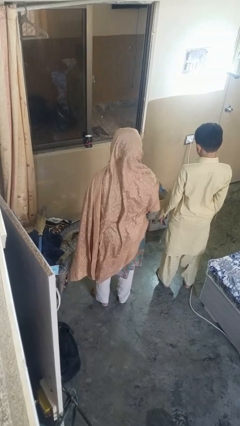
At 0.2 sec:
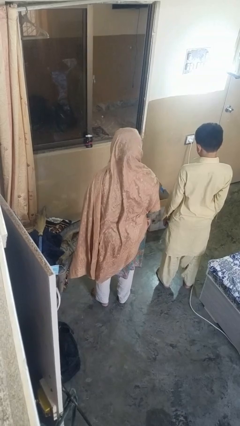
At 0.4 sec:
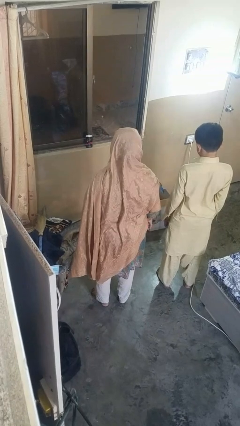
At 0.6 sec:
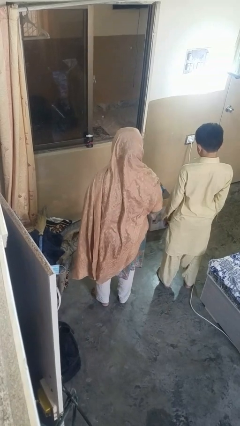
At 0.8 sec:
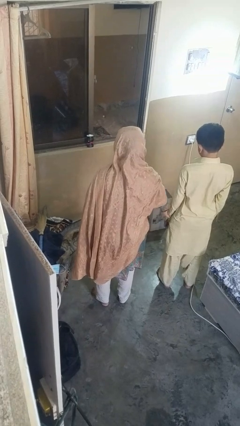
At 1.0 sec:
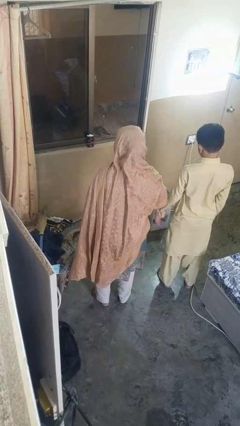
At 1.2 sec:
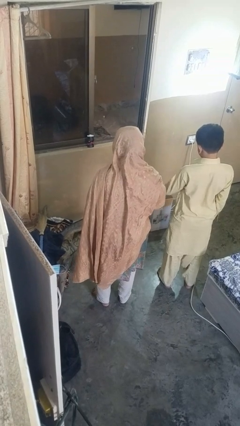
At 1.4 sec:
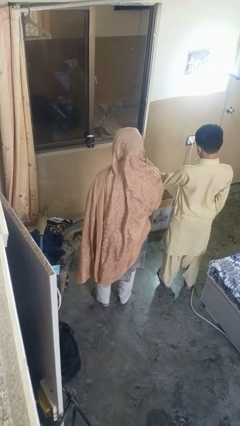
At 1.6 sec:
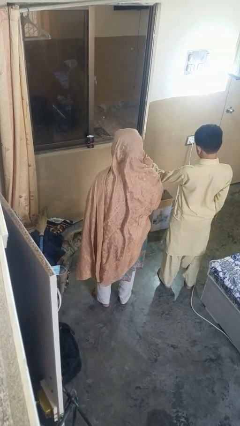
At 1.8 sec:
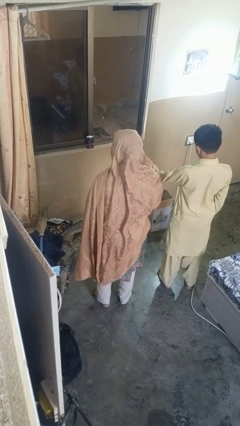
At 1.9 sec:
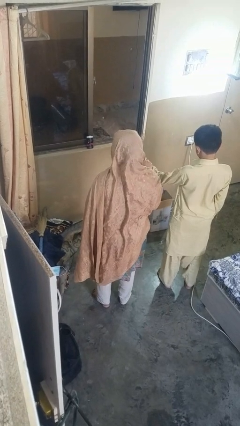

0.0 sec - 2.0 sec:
person grabs person by forearm

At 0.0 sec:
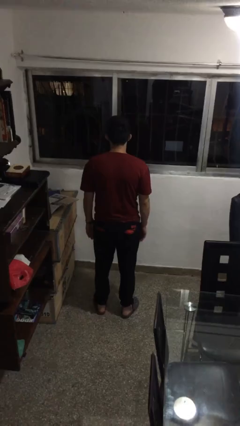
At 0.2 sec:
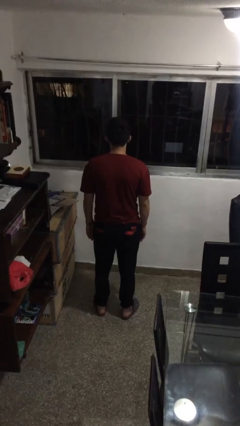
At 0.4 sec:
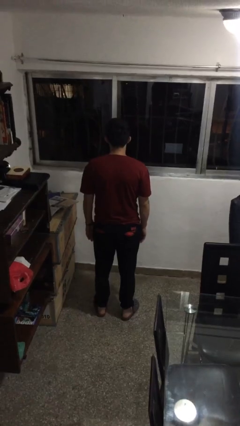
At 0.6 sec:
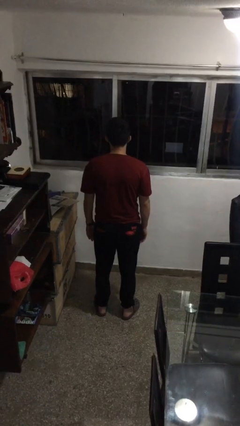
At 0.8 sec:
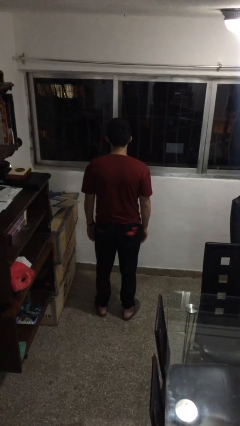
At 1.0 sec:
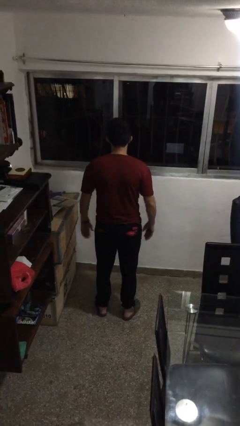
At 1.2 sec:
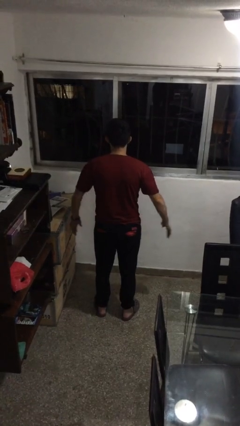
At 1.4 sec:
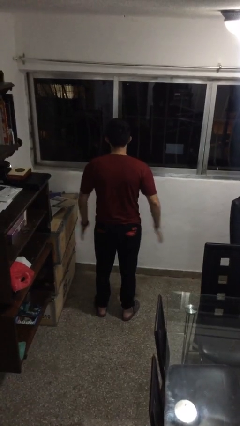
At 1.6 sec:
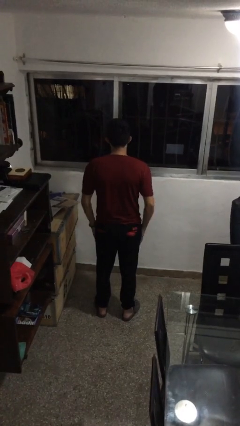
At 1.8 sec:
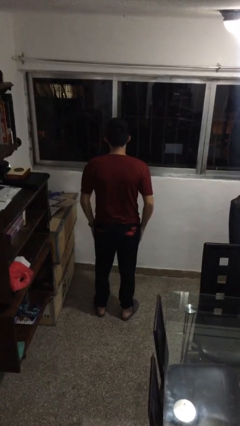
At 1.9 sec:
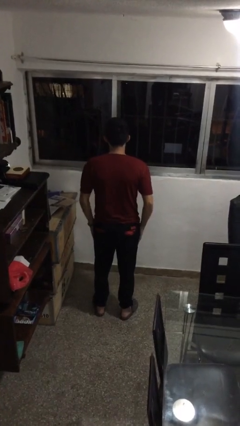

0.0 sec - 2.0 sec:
person slaps hands on thighs

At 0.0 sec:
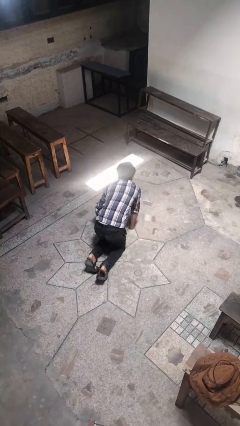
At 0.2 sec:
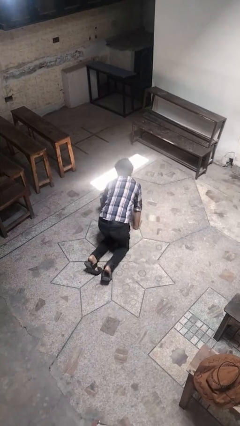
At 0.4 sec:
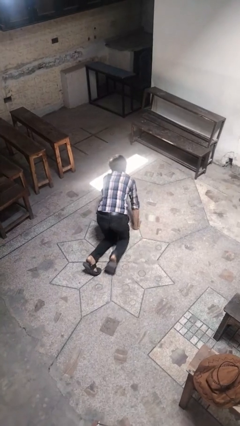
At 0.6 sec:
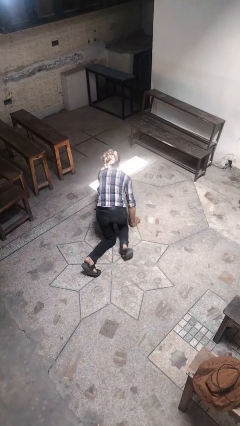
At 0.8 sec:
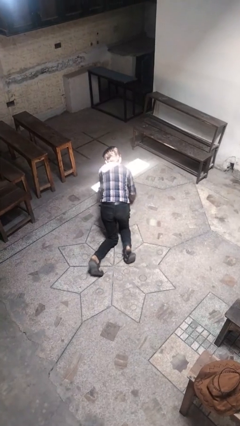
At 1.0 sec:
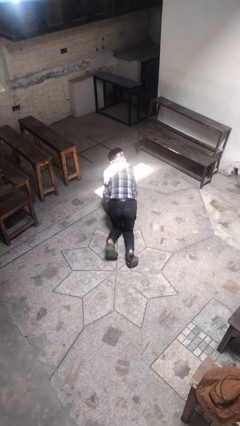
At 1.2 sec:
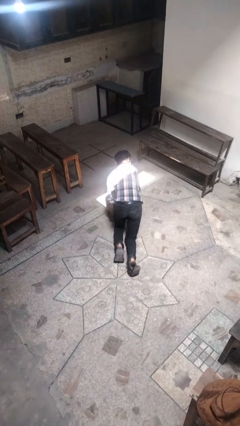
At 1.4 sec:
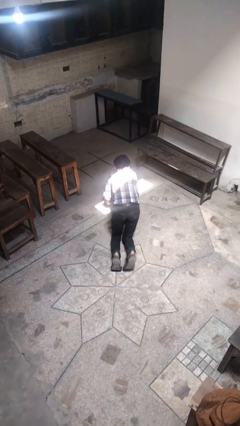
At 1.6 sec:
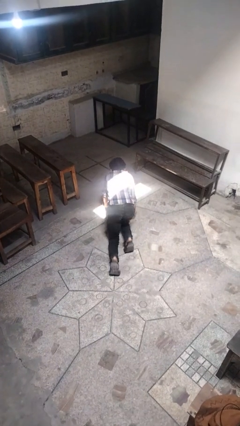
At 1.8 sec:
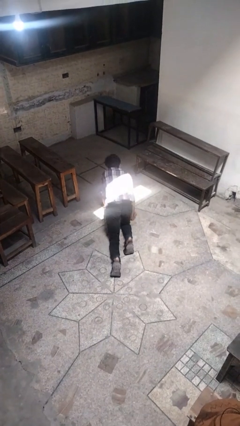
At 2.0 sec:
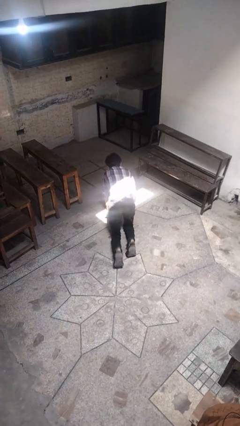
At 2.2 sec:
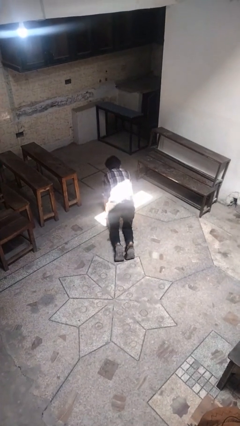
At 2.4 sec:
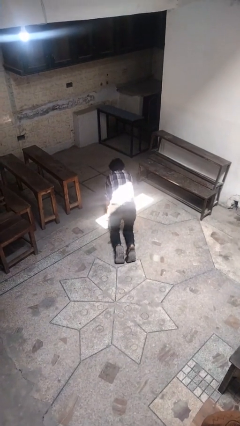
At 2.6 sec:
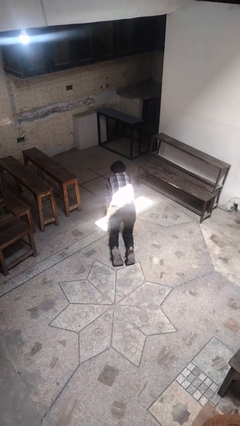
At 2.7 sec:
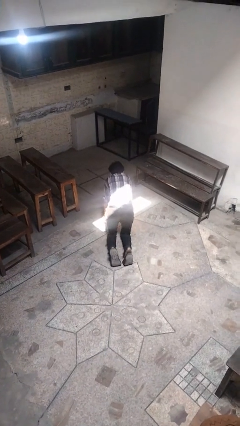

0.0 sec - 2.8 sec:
person crawls

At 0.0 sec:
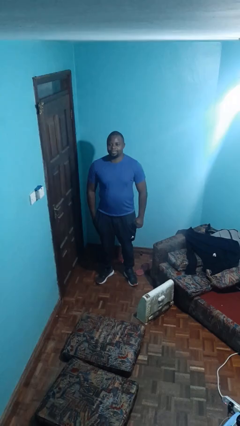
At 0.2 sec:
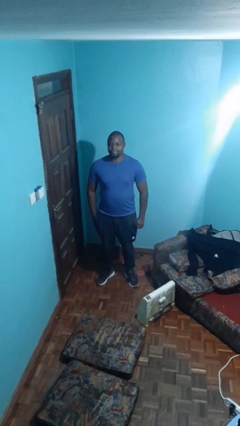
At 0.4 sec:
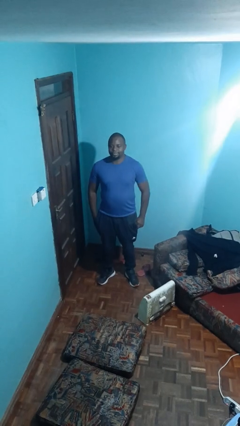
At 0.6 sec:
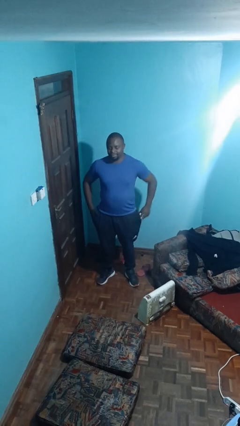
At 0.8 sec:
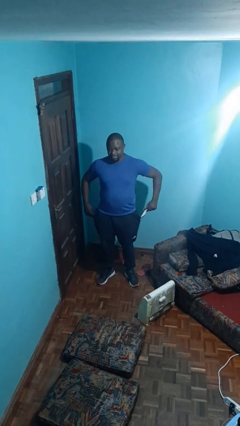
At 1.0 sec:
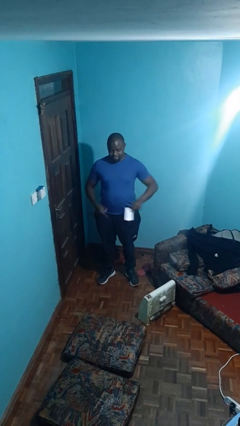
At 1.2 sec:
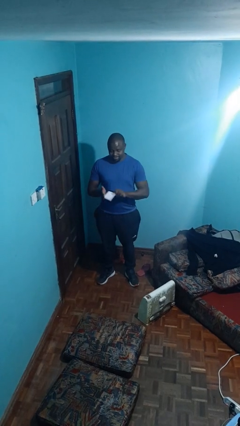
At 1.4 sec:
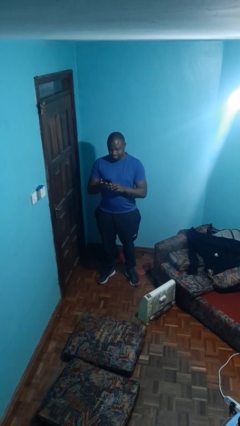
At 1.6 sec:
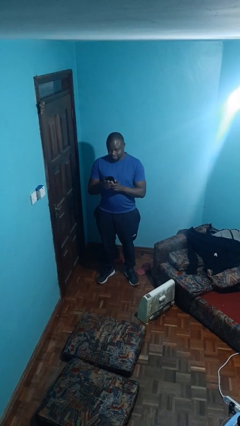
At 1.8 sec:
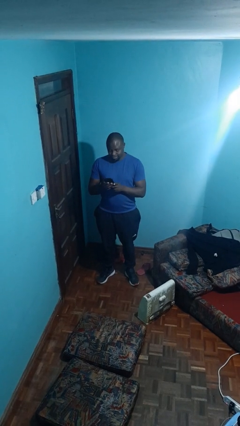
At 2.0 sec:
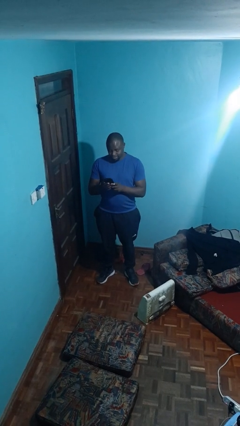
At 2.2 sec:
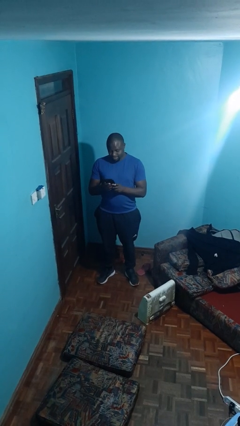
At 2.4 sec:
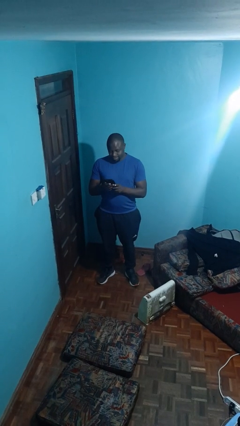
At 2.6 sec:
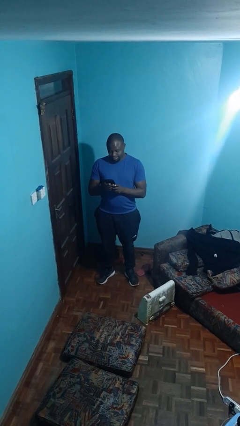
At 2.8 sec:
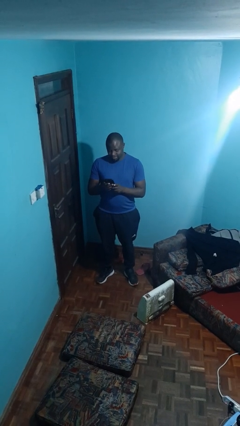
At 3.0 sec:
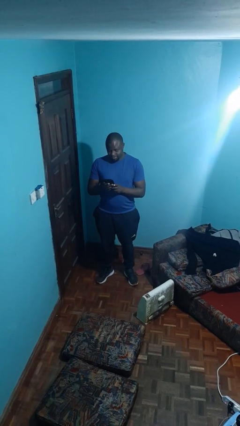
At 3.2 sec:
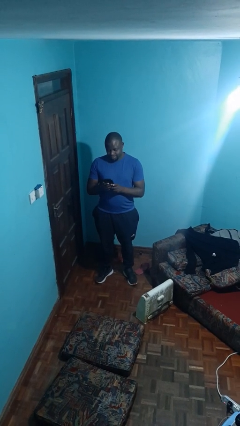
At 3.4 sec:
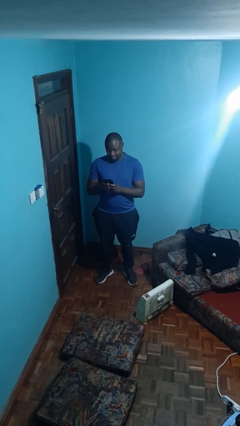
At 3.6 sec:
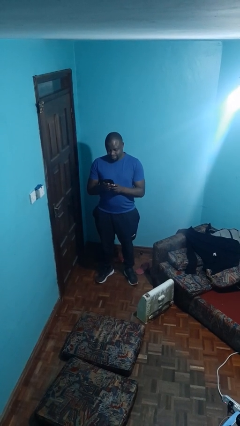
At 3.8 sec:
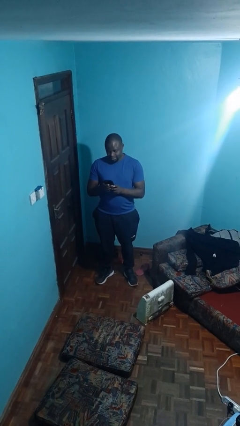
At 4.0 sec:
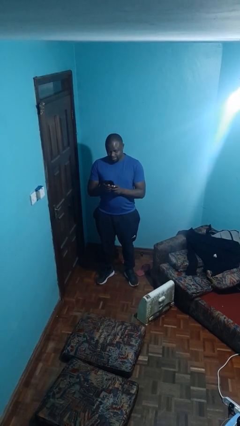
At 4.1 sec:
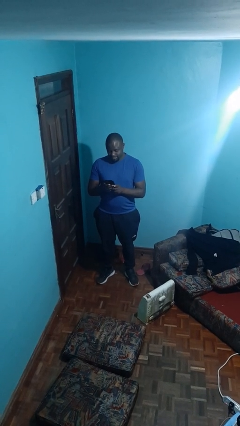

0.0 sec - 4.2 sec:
person takes phone from pocket

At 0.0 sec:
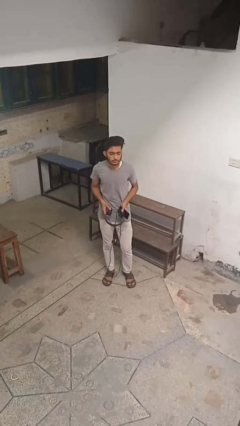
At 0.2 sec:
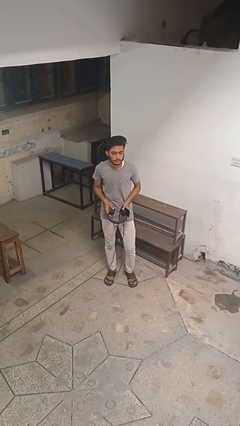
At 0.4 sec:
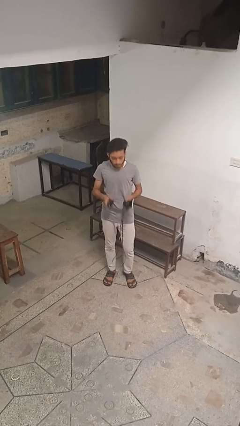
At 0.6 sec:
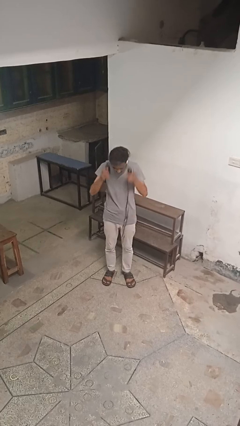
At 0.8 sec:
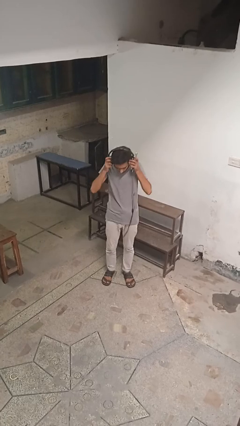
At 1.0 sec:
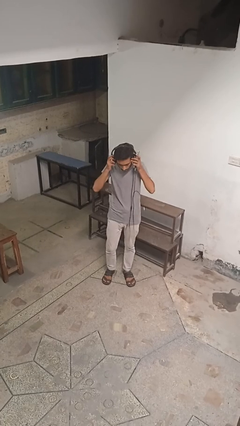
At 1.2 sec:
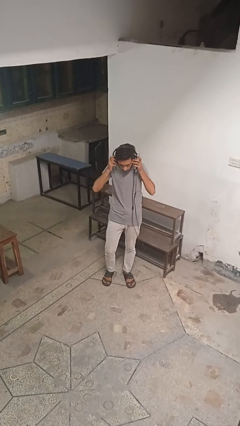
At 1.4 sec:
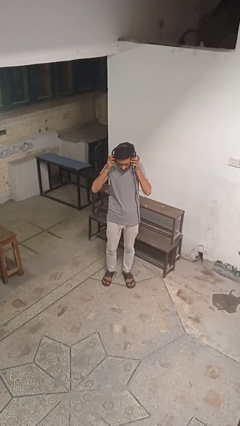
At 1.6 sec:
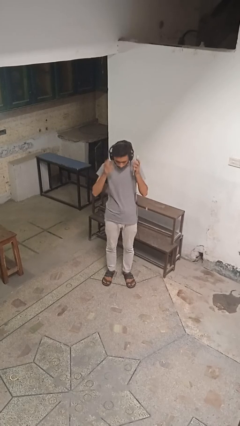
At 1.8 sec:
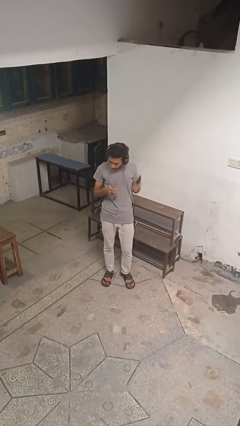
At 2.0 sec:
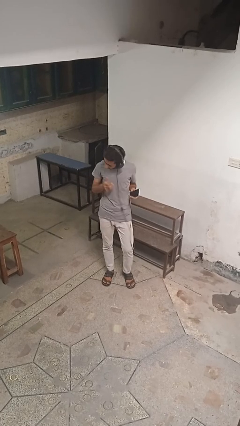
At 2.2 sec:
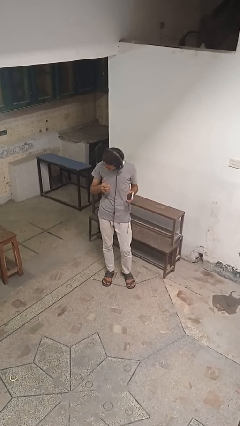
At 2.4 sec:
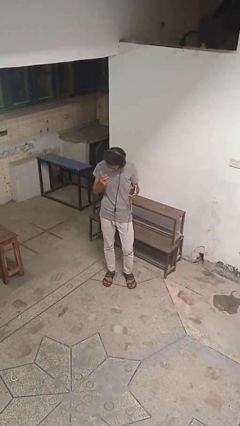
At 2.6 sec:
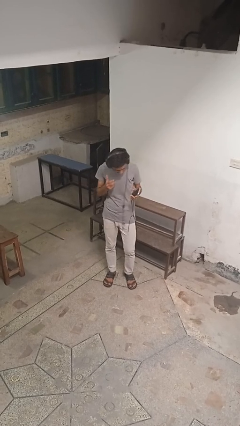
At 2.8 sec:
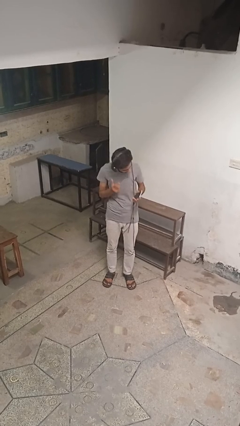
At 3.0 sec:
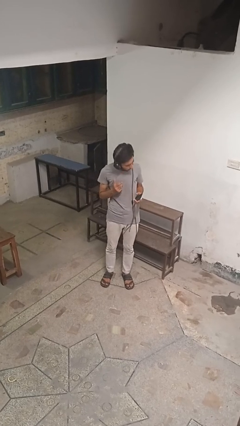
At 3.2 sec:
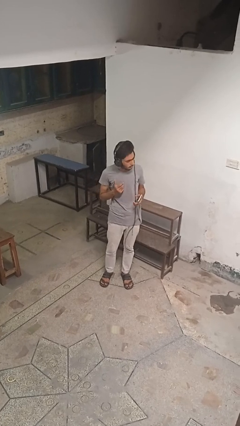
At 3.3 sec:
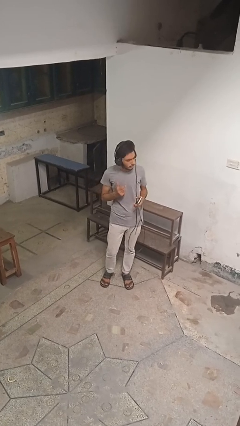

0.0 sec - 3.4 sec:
person puts on headphones

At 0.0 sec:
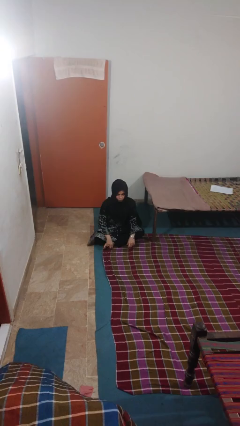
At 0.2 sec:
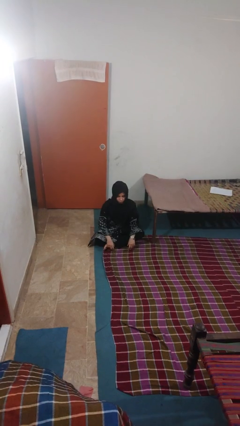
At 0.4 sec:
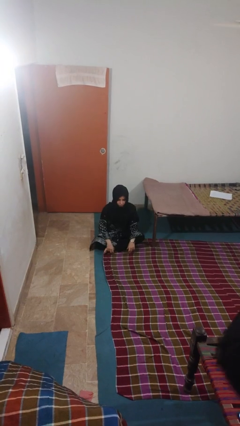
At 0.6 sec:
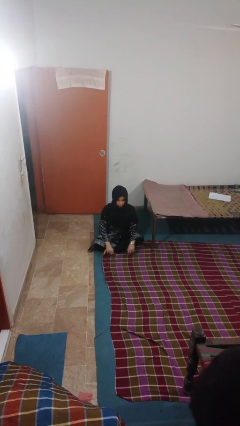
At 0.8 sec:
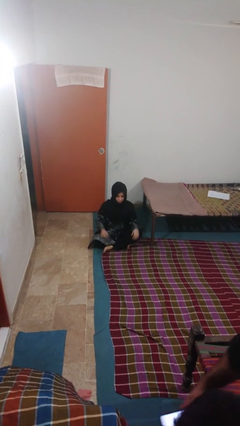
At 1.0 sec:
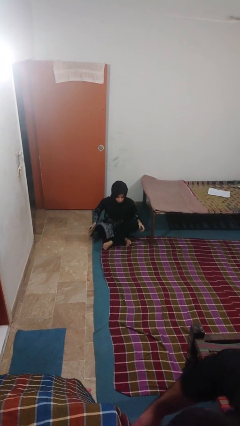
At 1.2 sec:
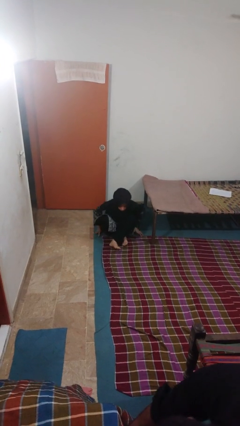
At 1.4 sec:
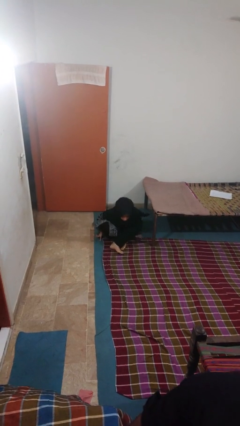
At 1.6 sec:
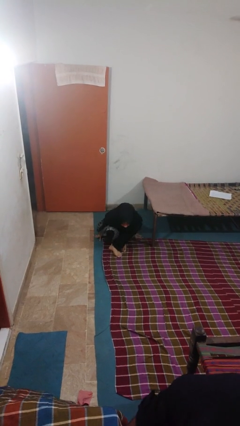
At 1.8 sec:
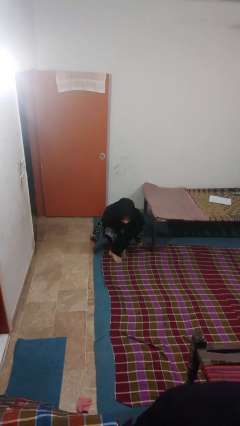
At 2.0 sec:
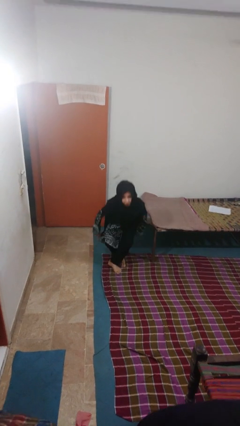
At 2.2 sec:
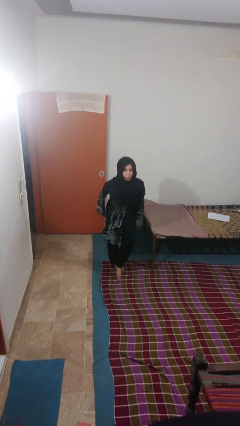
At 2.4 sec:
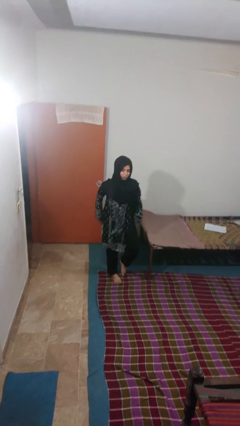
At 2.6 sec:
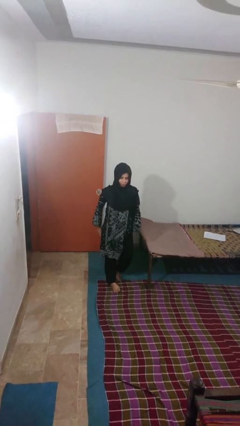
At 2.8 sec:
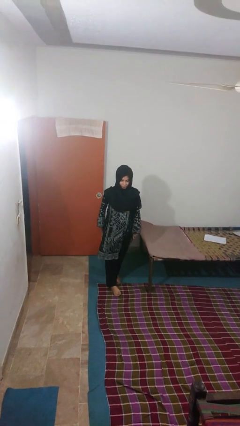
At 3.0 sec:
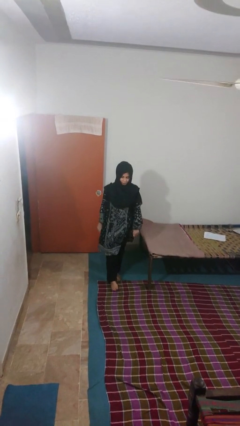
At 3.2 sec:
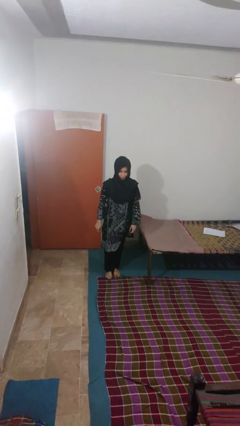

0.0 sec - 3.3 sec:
person stands up from floor
